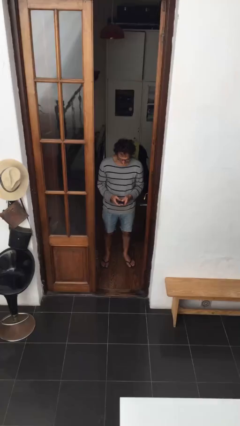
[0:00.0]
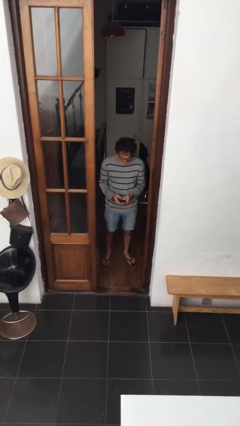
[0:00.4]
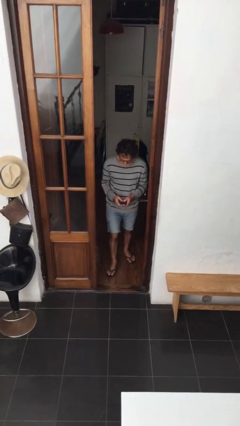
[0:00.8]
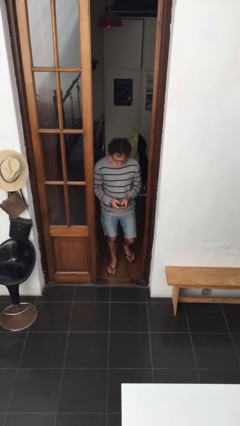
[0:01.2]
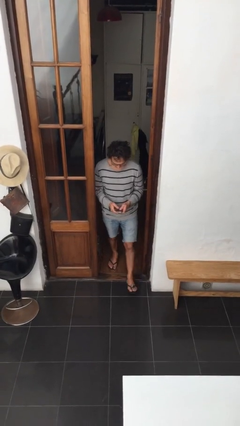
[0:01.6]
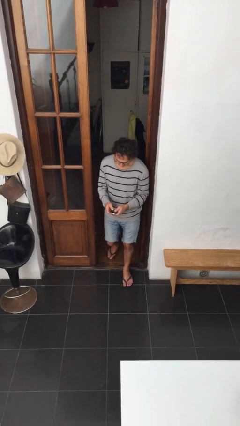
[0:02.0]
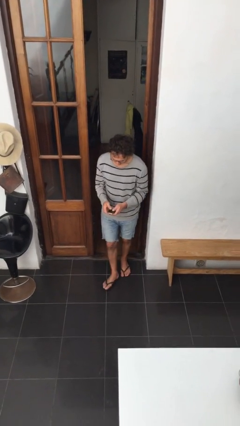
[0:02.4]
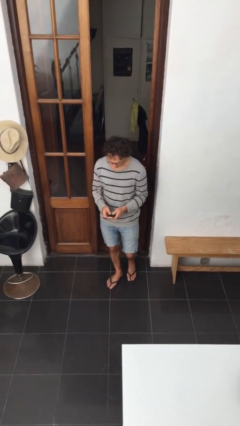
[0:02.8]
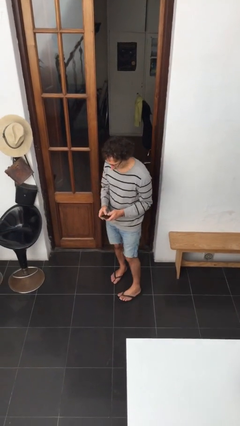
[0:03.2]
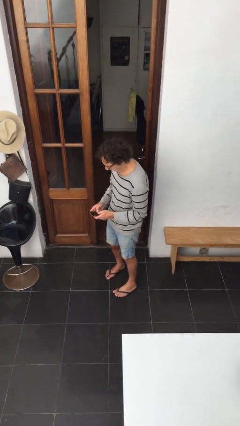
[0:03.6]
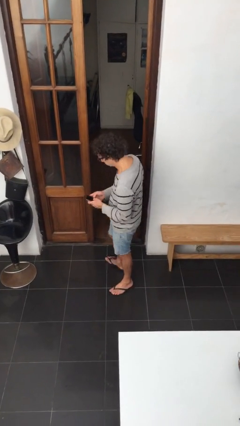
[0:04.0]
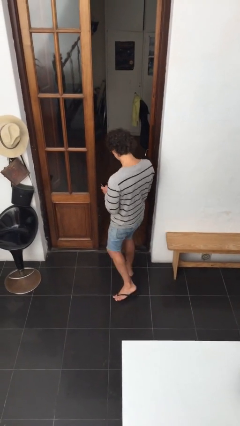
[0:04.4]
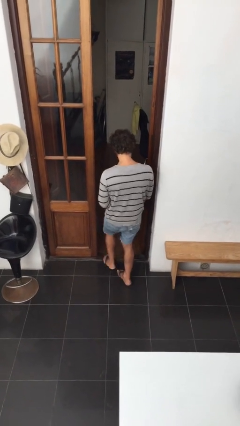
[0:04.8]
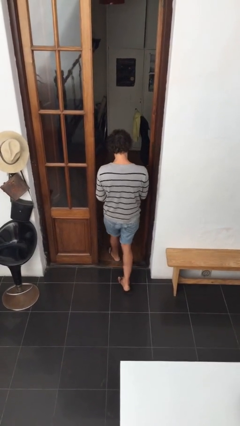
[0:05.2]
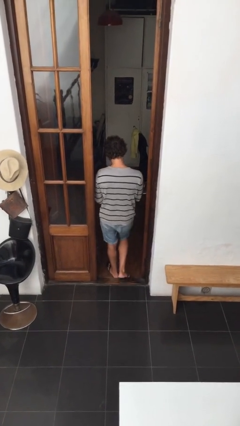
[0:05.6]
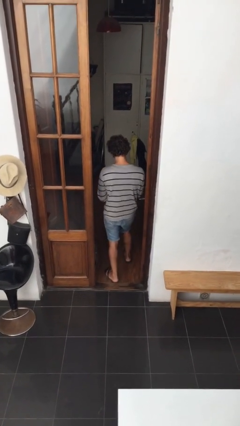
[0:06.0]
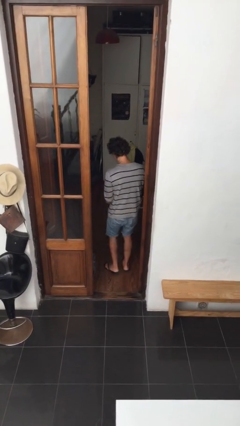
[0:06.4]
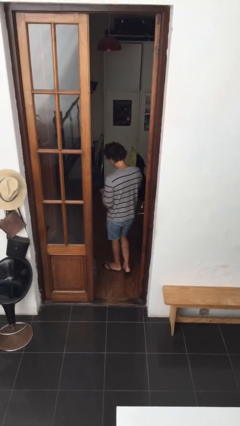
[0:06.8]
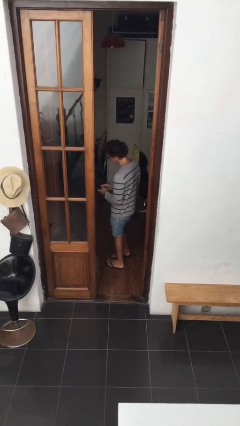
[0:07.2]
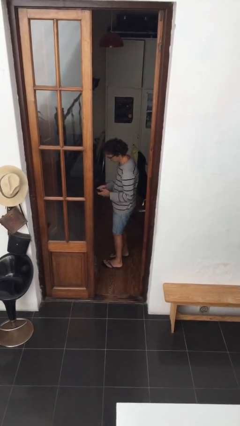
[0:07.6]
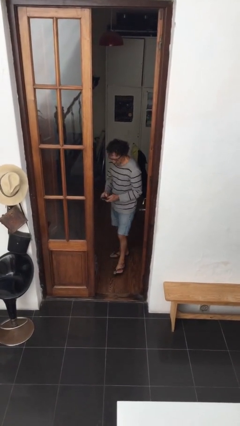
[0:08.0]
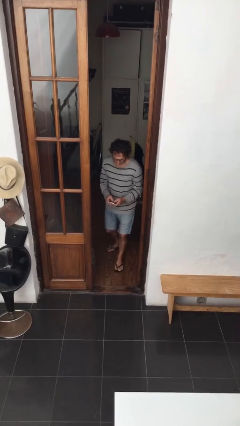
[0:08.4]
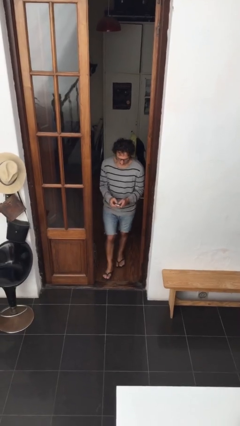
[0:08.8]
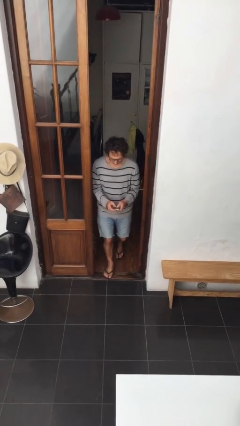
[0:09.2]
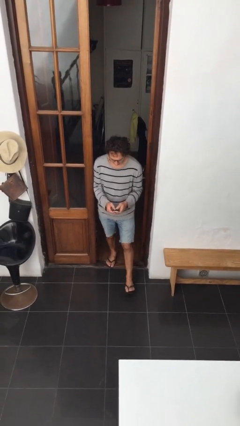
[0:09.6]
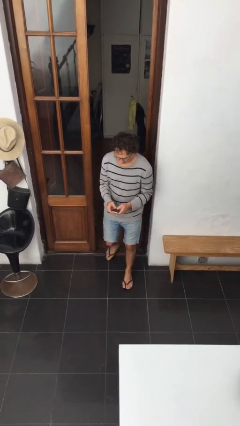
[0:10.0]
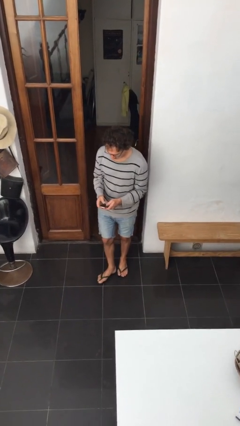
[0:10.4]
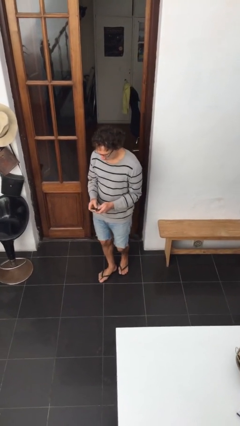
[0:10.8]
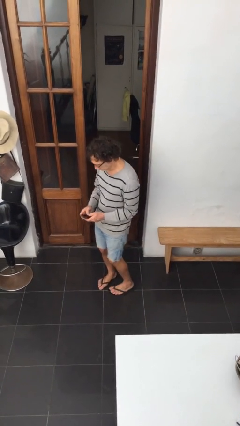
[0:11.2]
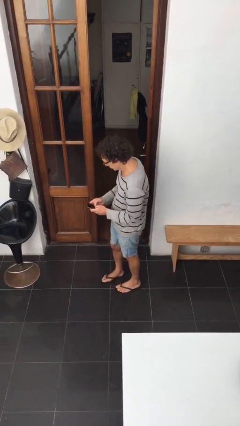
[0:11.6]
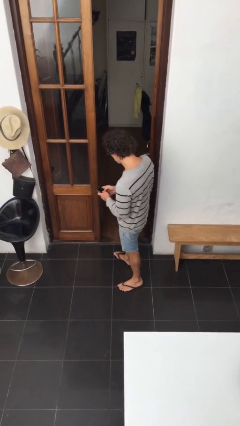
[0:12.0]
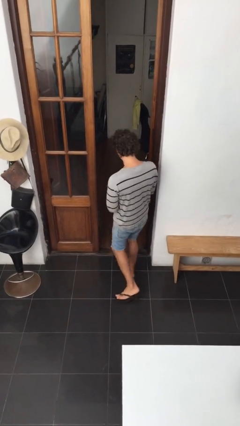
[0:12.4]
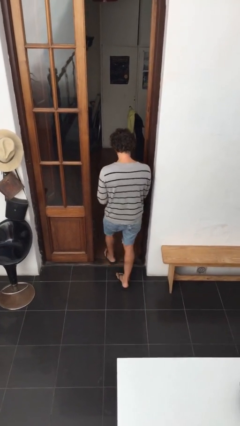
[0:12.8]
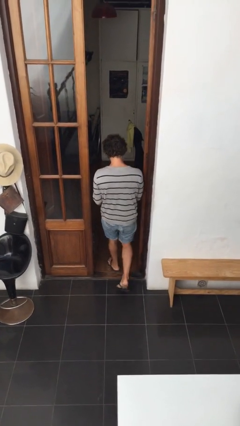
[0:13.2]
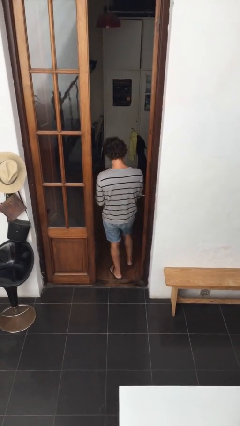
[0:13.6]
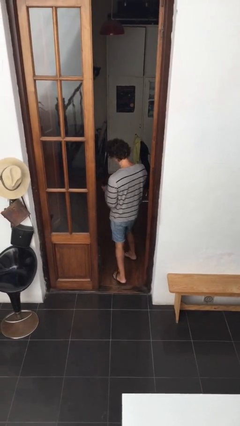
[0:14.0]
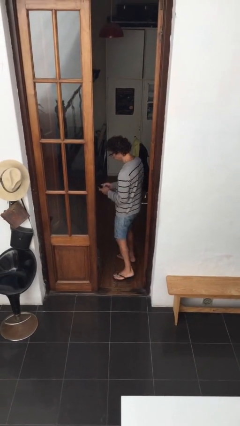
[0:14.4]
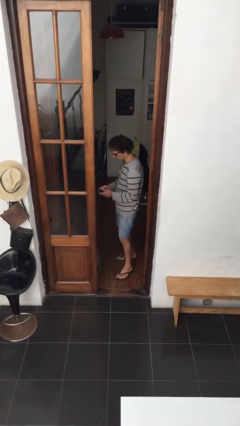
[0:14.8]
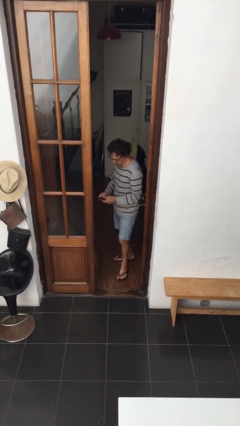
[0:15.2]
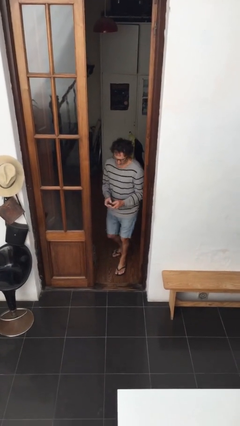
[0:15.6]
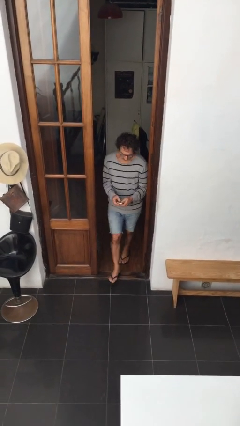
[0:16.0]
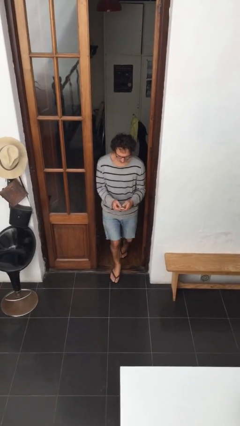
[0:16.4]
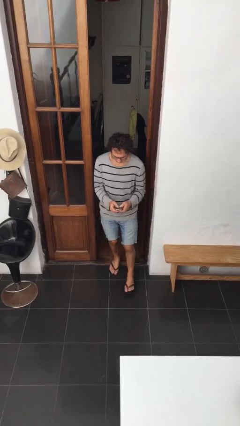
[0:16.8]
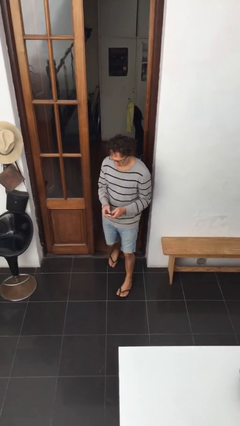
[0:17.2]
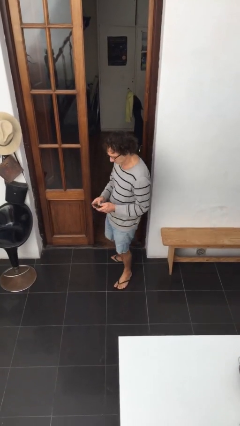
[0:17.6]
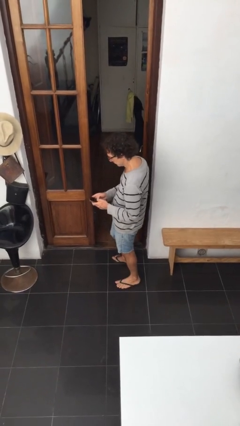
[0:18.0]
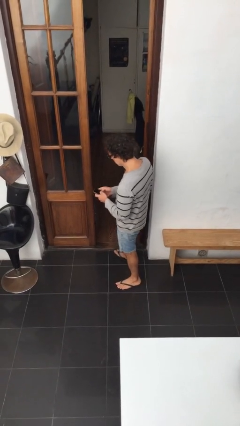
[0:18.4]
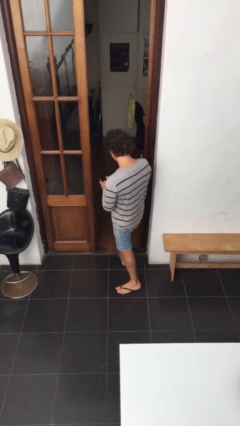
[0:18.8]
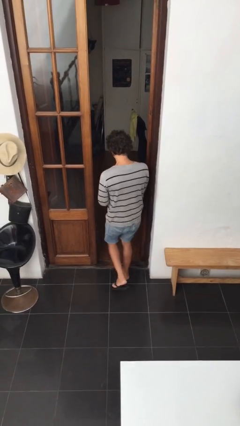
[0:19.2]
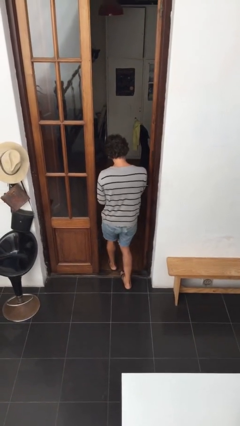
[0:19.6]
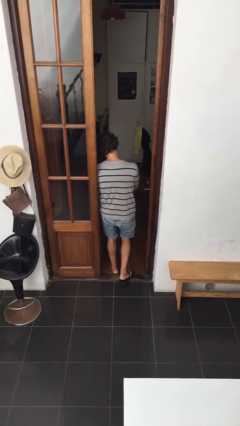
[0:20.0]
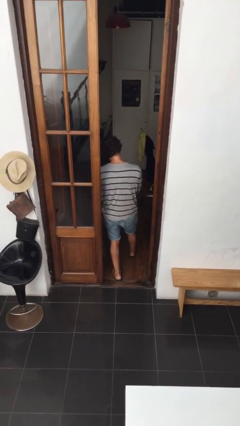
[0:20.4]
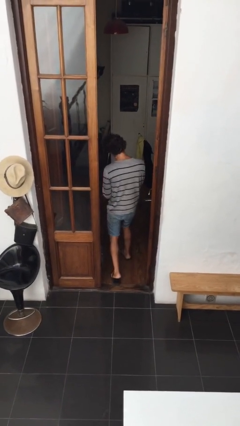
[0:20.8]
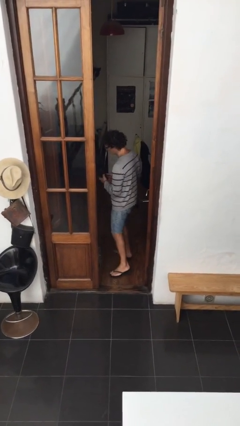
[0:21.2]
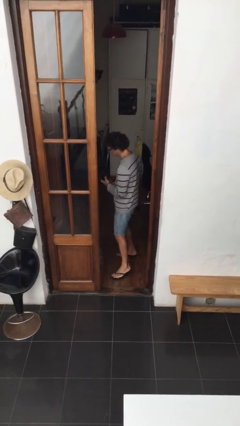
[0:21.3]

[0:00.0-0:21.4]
person texts on phone

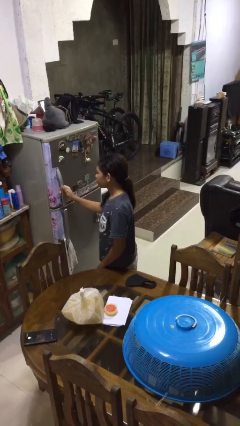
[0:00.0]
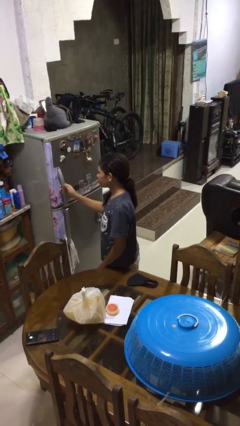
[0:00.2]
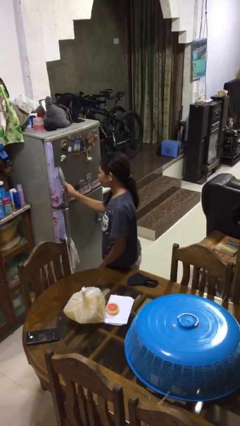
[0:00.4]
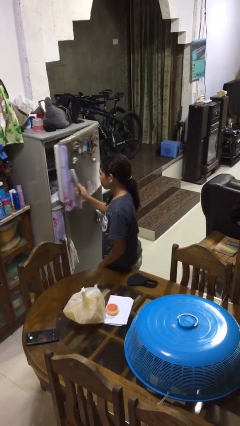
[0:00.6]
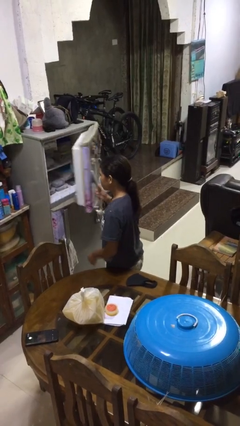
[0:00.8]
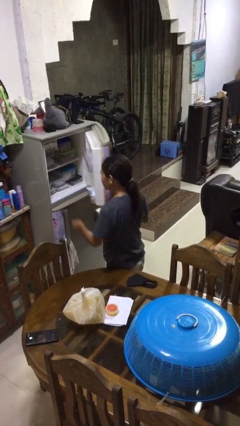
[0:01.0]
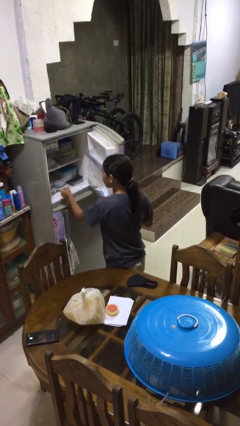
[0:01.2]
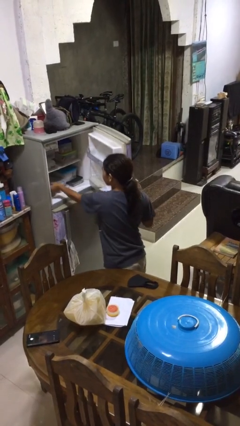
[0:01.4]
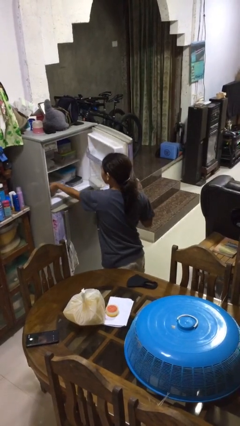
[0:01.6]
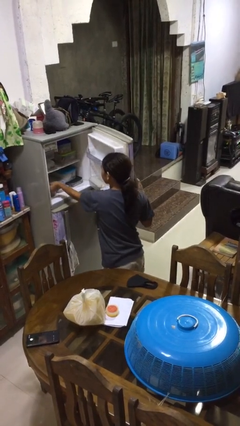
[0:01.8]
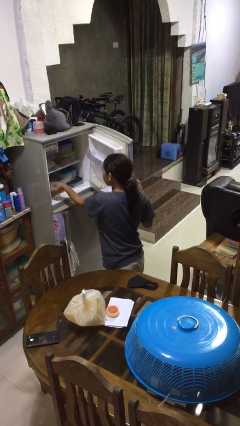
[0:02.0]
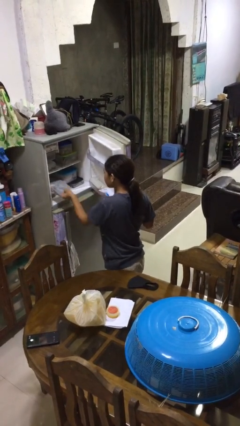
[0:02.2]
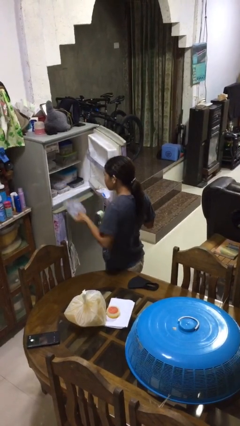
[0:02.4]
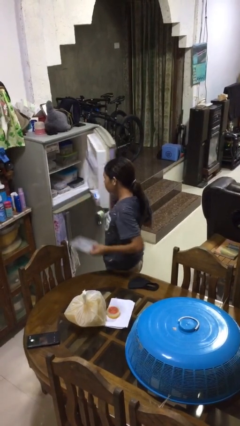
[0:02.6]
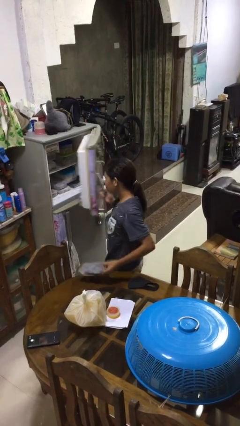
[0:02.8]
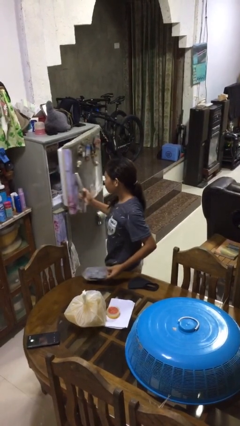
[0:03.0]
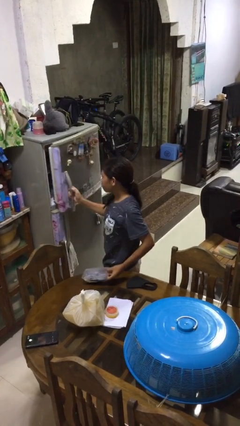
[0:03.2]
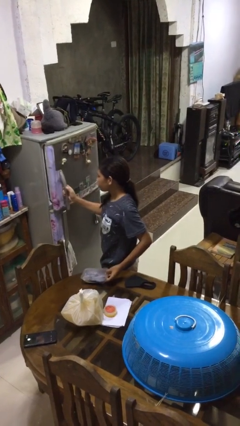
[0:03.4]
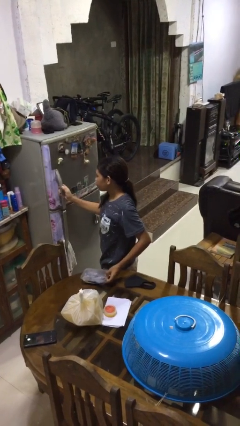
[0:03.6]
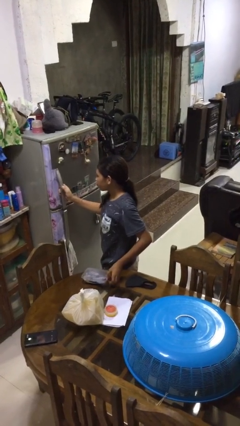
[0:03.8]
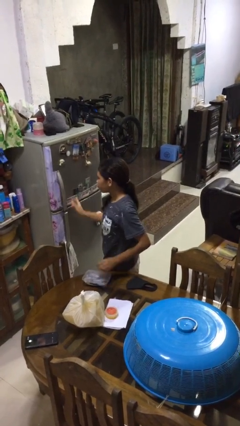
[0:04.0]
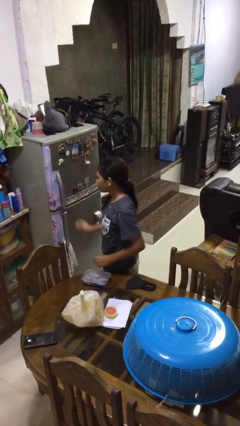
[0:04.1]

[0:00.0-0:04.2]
person takes object from refrigerator

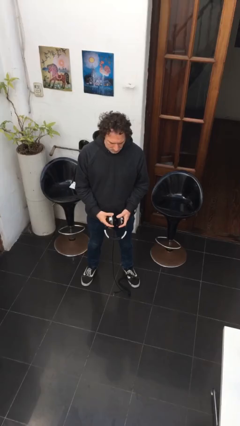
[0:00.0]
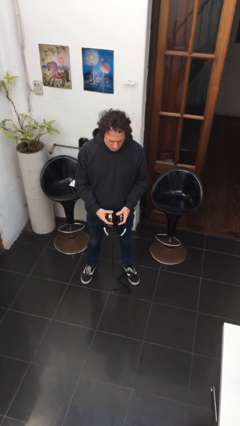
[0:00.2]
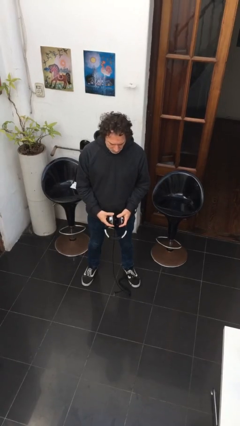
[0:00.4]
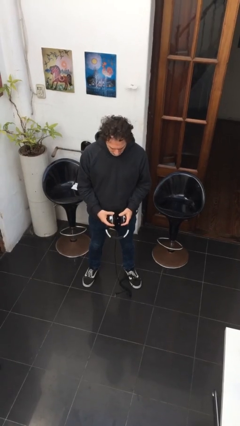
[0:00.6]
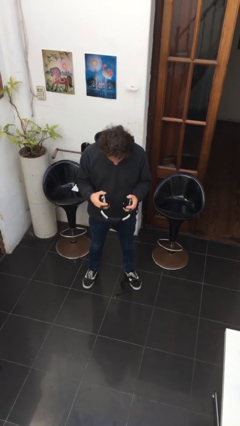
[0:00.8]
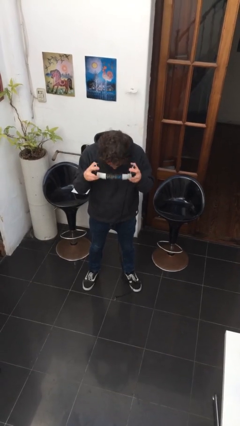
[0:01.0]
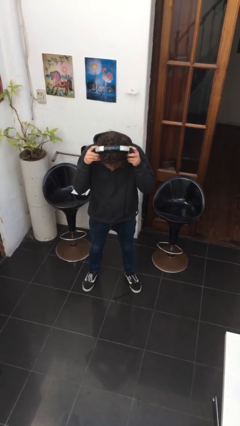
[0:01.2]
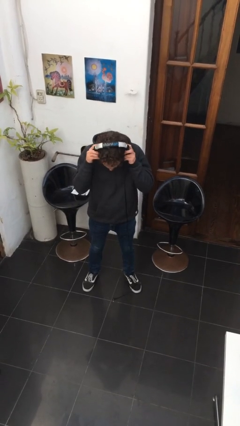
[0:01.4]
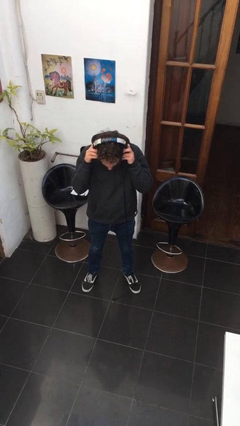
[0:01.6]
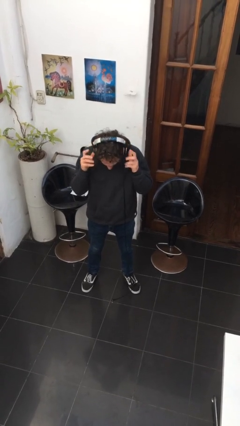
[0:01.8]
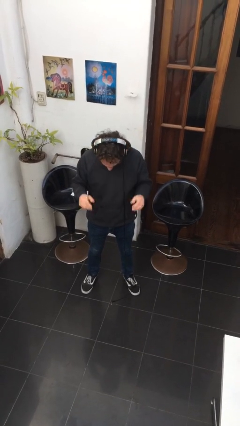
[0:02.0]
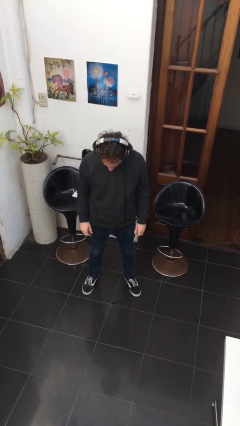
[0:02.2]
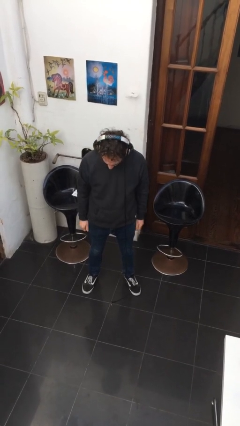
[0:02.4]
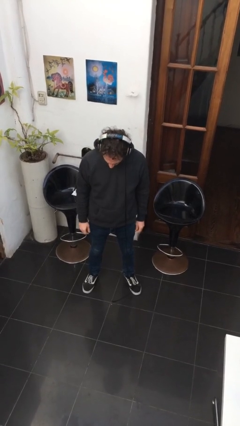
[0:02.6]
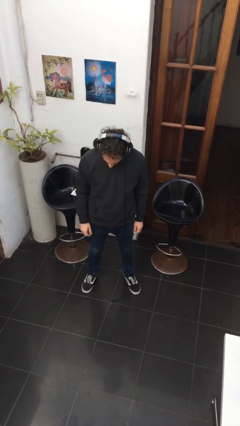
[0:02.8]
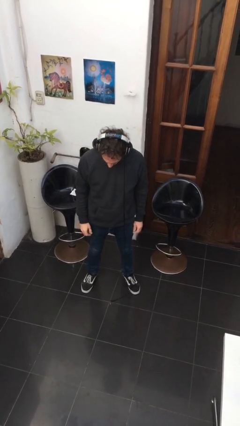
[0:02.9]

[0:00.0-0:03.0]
person puts on headphones
